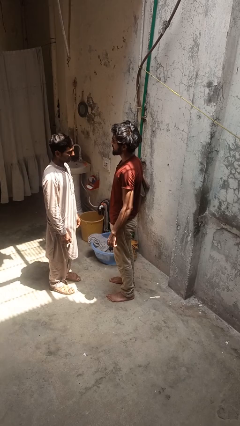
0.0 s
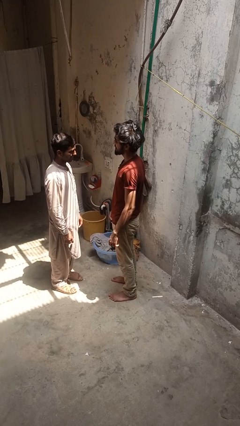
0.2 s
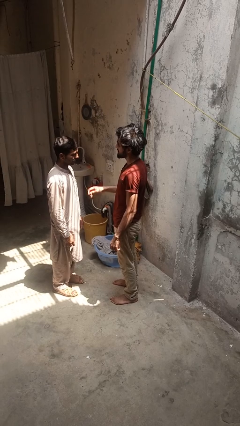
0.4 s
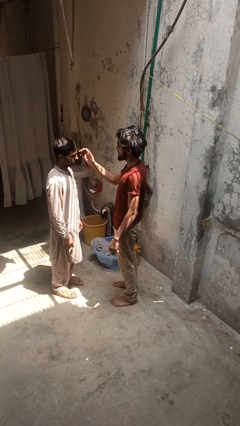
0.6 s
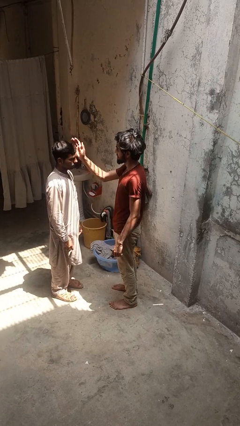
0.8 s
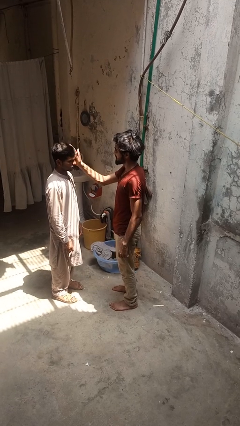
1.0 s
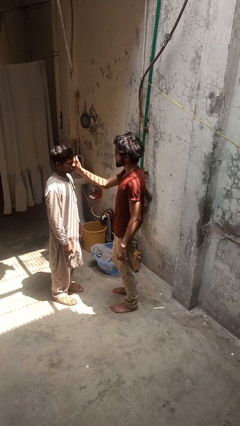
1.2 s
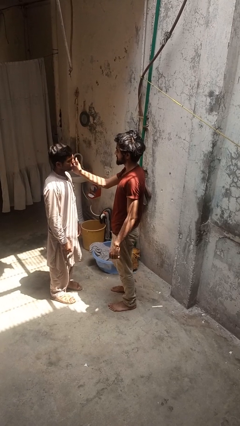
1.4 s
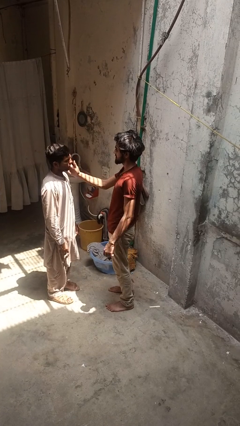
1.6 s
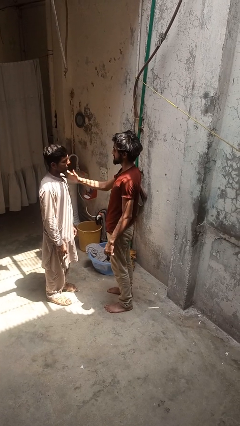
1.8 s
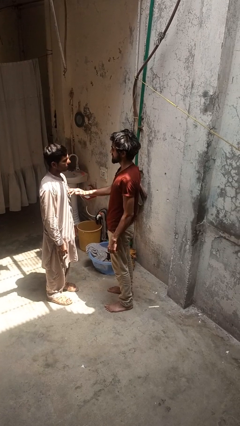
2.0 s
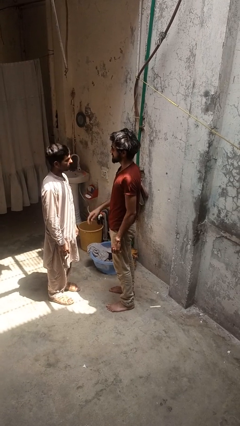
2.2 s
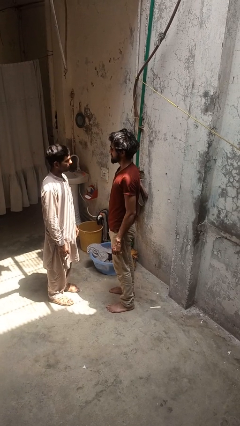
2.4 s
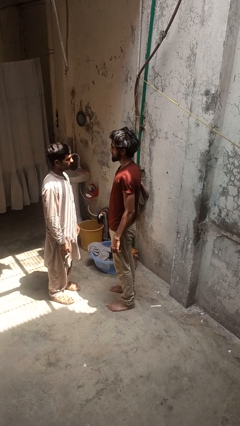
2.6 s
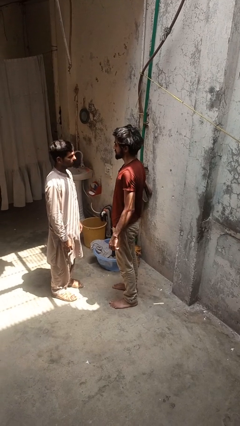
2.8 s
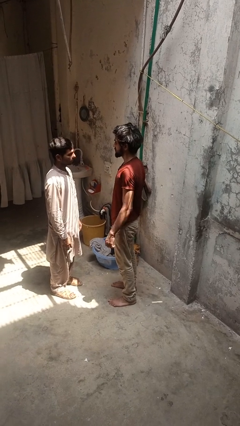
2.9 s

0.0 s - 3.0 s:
person touches face of person

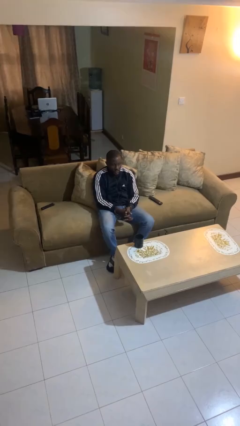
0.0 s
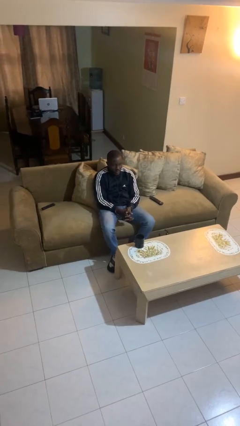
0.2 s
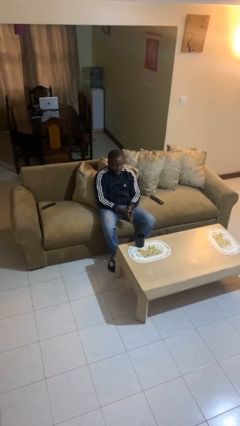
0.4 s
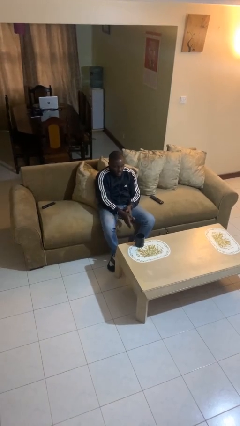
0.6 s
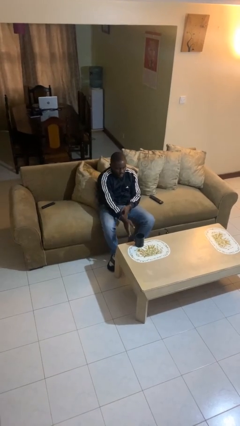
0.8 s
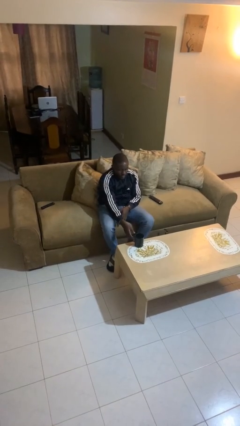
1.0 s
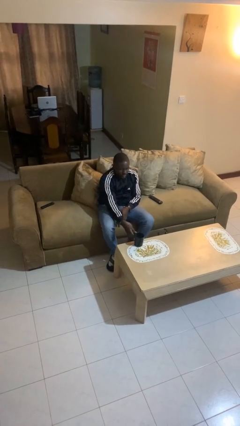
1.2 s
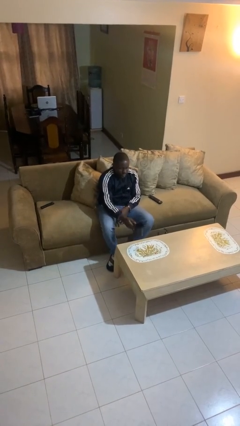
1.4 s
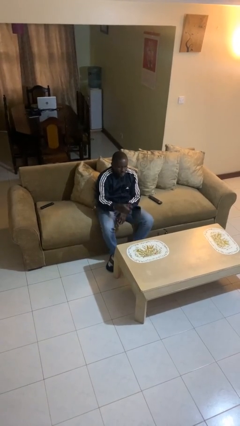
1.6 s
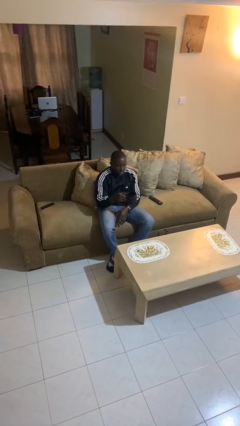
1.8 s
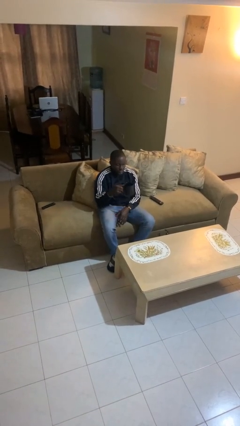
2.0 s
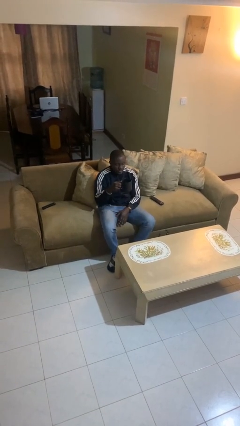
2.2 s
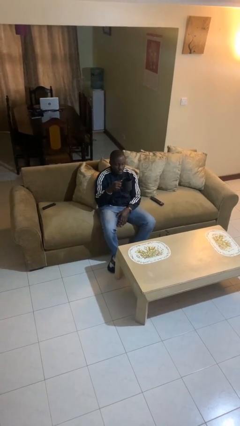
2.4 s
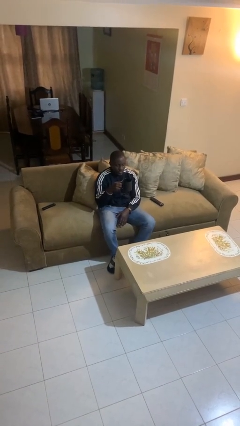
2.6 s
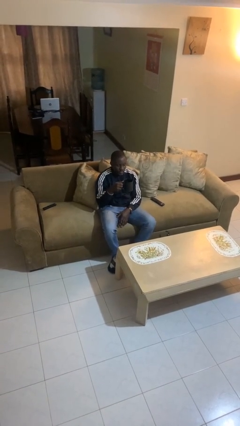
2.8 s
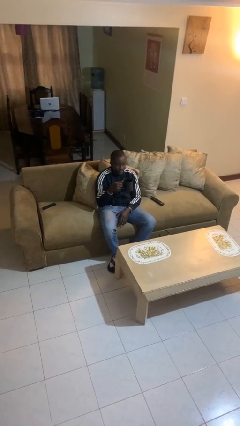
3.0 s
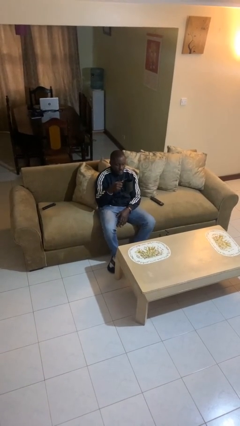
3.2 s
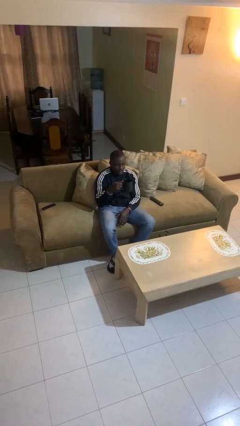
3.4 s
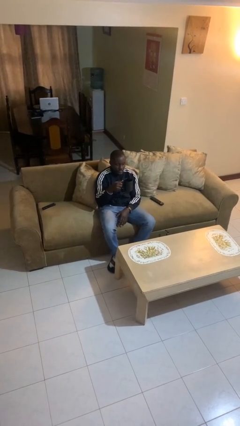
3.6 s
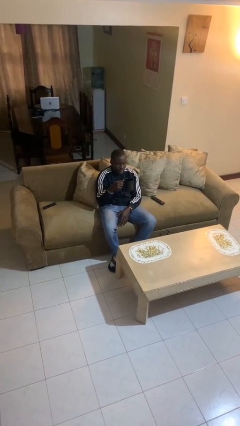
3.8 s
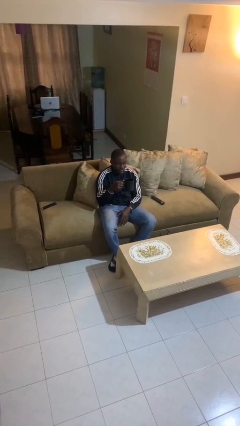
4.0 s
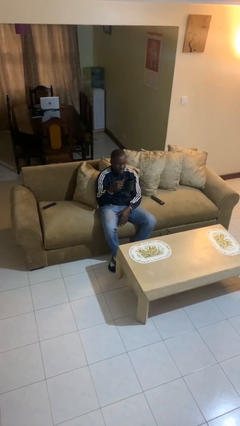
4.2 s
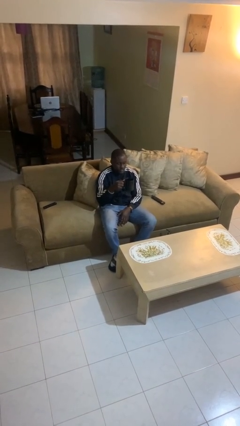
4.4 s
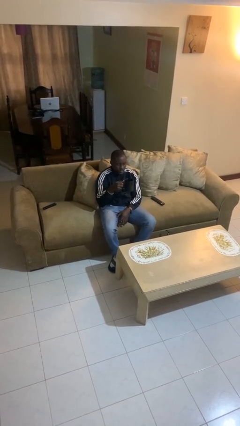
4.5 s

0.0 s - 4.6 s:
person picks up object from table

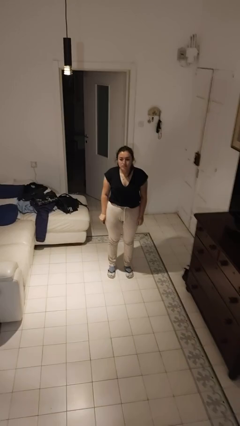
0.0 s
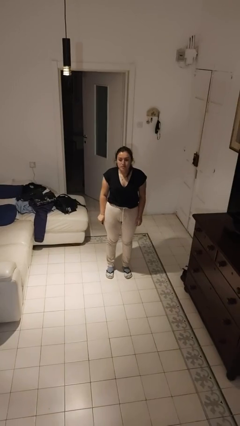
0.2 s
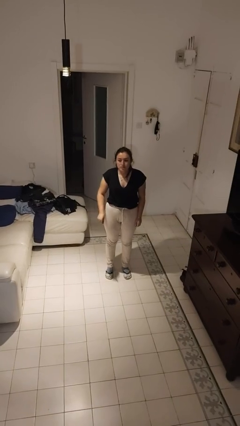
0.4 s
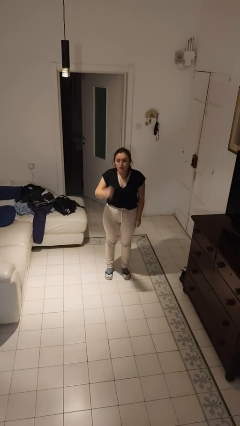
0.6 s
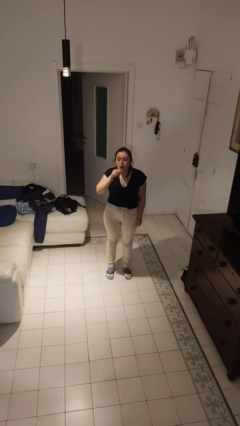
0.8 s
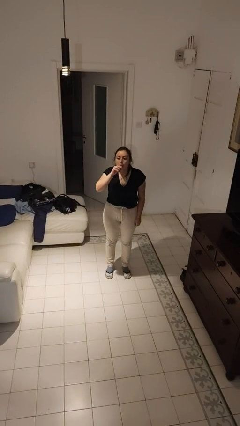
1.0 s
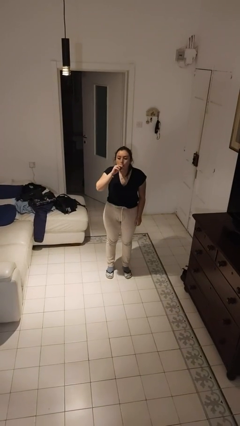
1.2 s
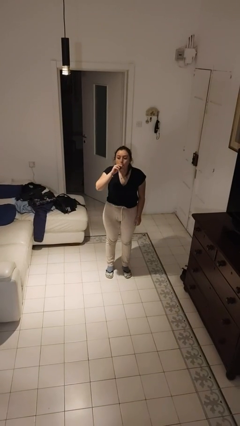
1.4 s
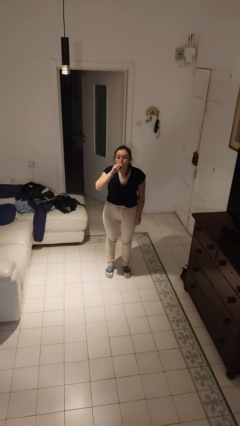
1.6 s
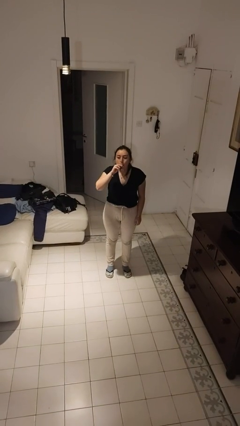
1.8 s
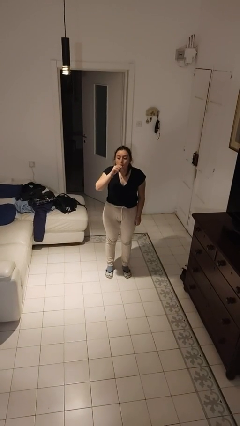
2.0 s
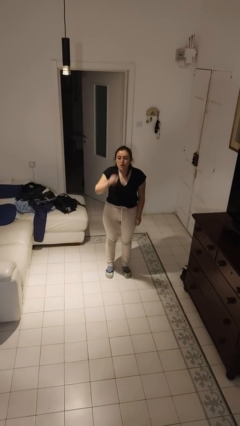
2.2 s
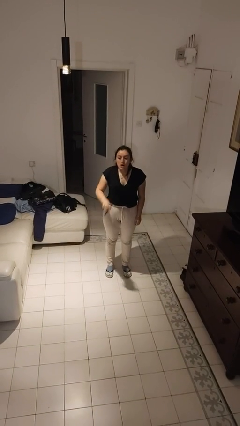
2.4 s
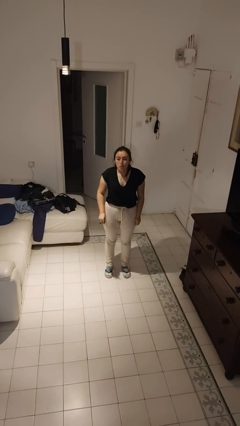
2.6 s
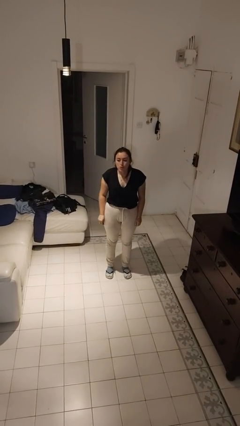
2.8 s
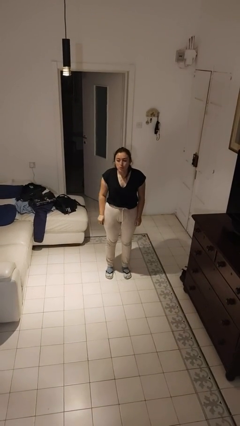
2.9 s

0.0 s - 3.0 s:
person vapes

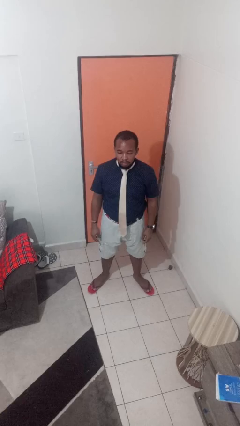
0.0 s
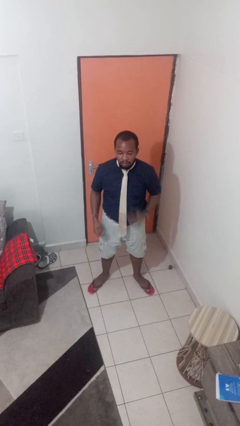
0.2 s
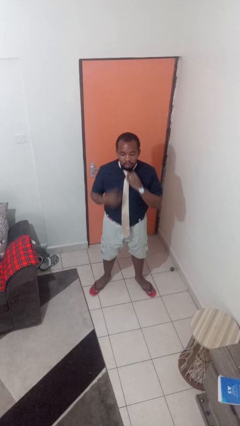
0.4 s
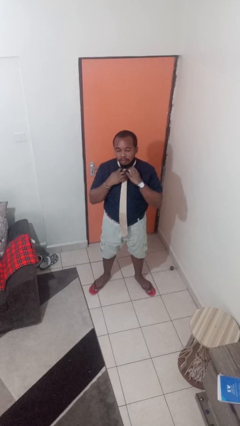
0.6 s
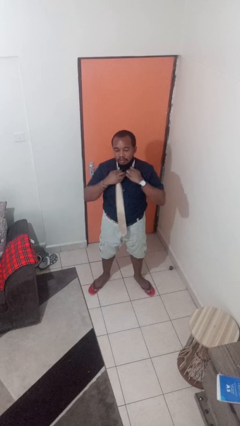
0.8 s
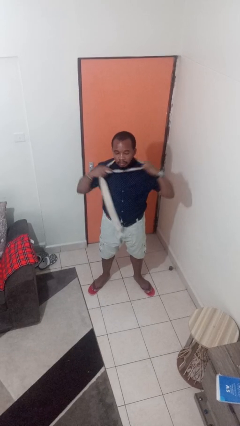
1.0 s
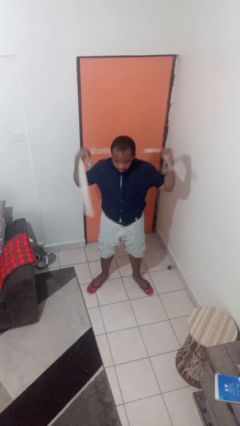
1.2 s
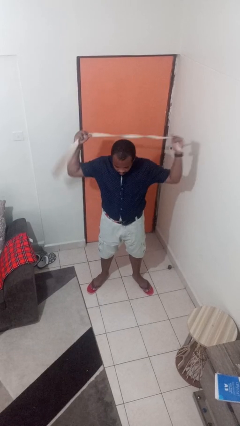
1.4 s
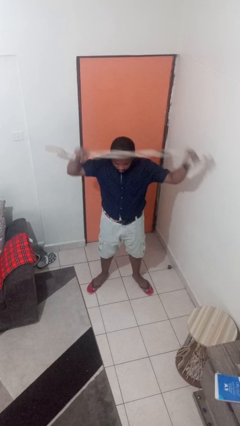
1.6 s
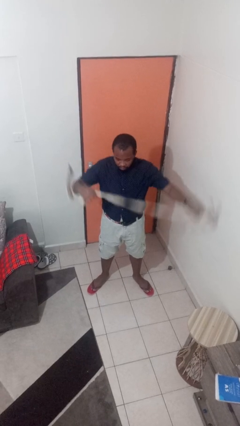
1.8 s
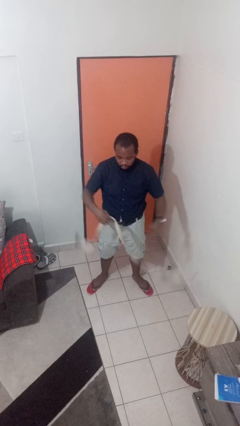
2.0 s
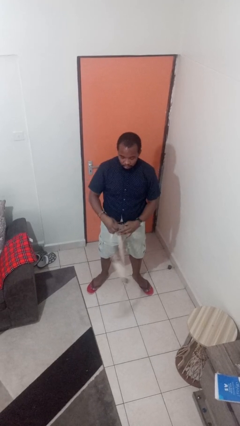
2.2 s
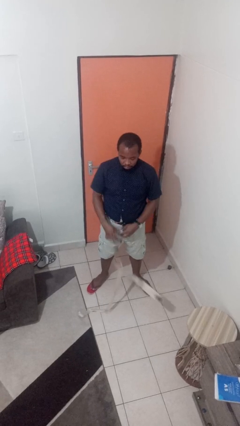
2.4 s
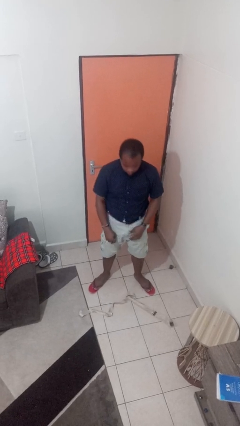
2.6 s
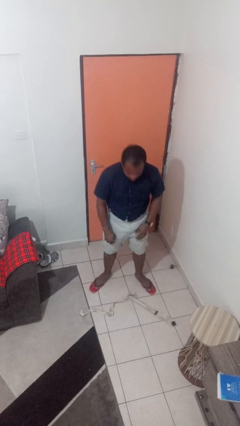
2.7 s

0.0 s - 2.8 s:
person takes off necktie

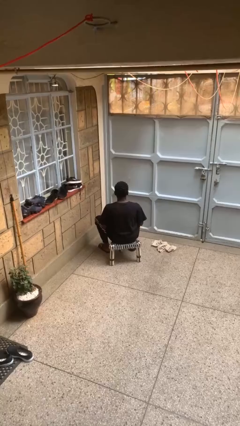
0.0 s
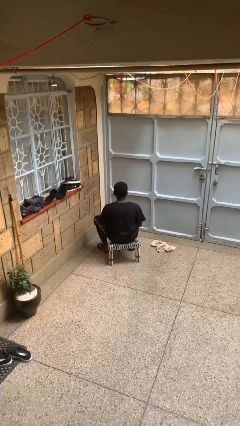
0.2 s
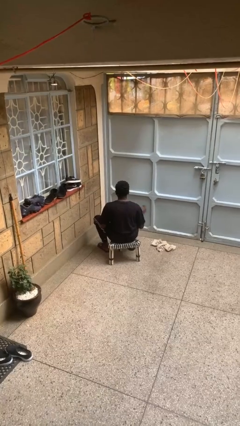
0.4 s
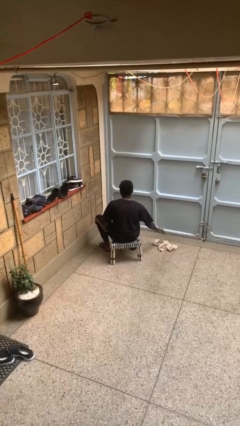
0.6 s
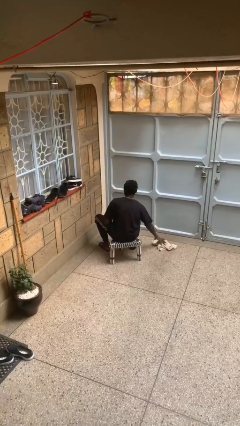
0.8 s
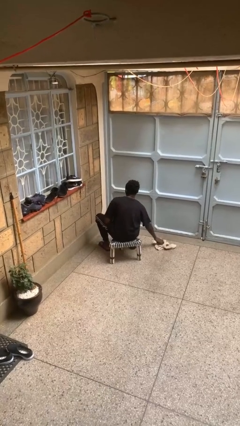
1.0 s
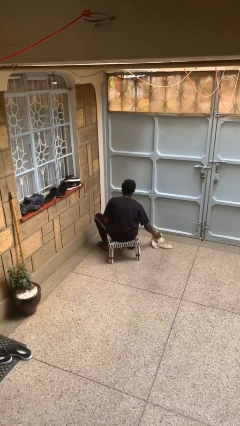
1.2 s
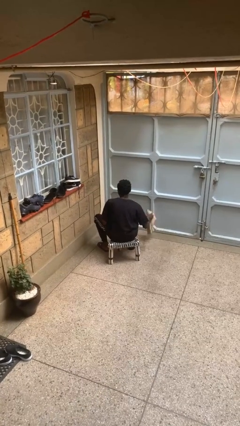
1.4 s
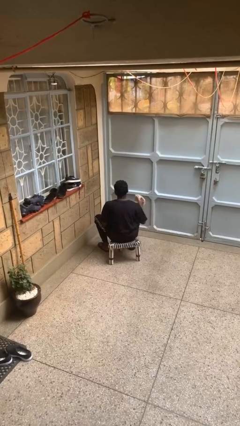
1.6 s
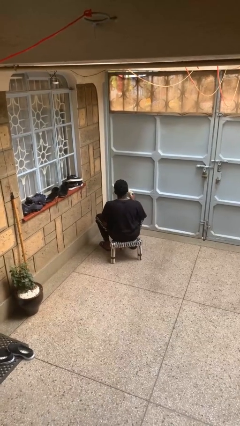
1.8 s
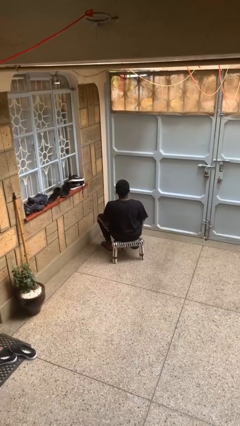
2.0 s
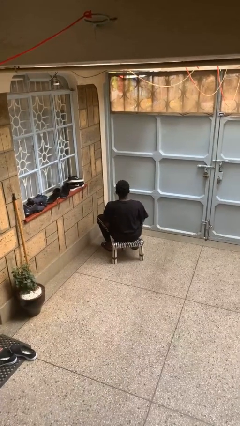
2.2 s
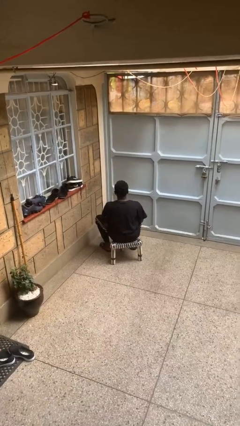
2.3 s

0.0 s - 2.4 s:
person picks up object from floor

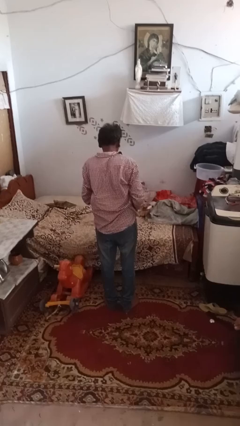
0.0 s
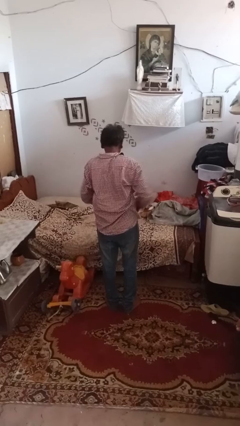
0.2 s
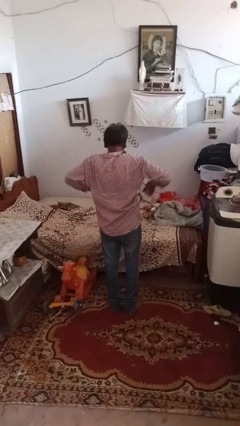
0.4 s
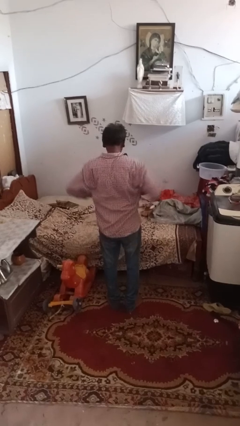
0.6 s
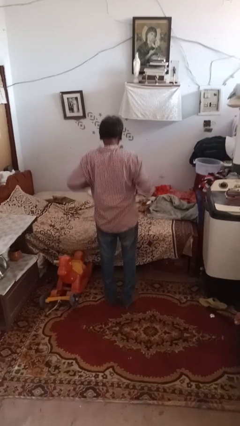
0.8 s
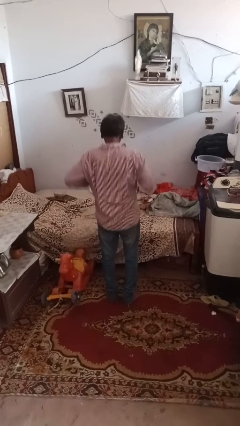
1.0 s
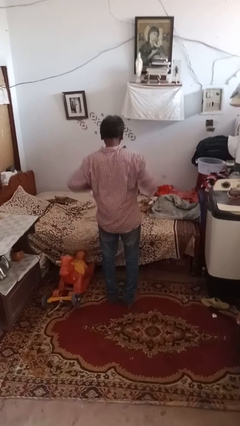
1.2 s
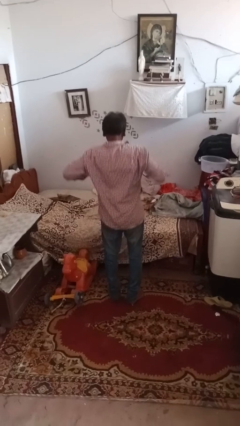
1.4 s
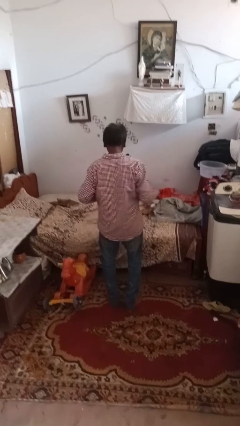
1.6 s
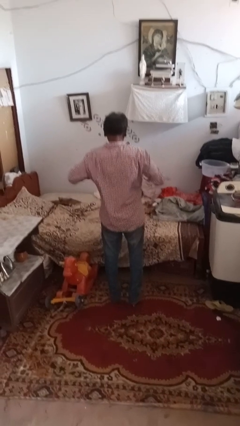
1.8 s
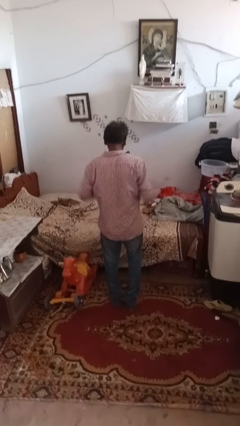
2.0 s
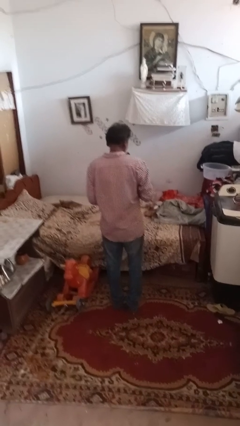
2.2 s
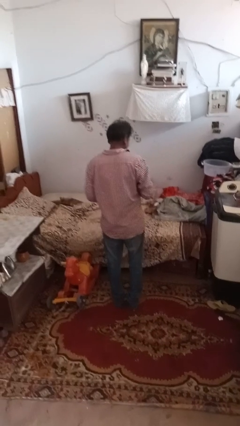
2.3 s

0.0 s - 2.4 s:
person dances in place
